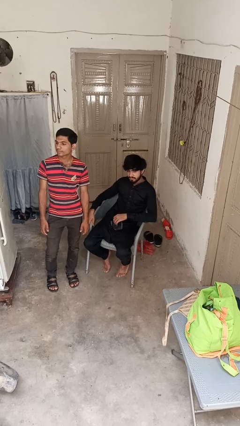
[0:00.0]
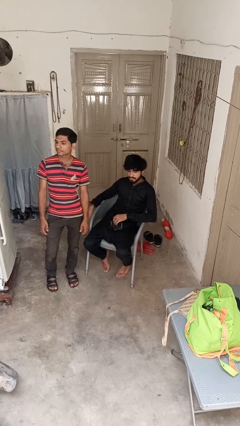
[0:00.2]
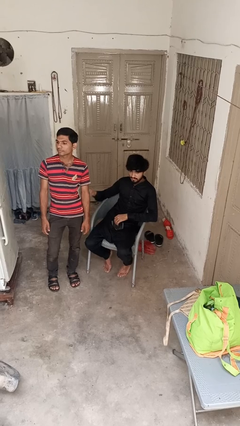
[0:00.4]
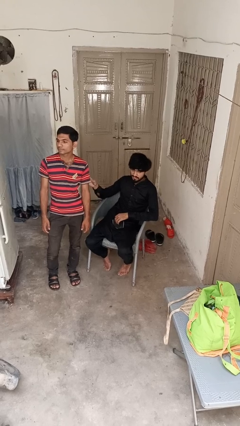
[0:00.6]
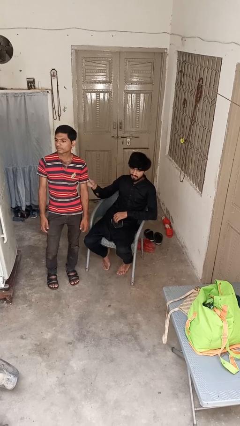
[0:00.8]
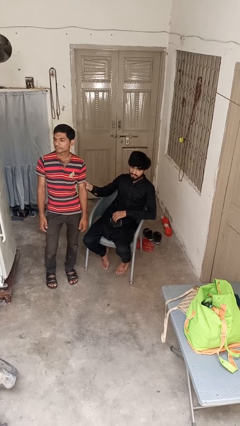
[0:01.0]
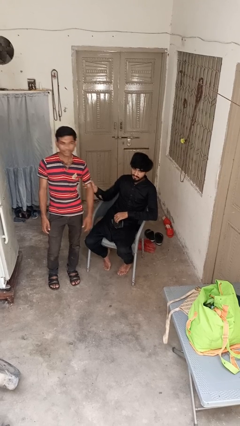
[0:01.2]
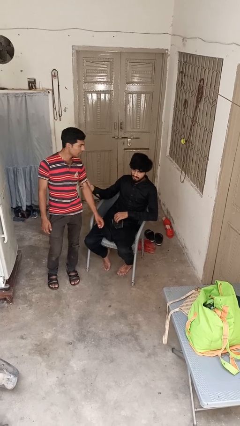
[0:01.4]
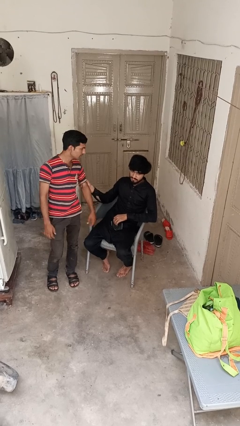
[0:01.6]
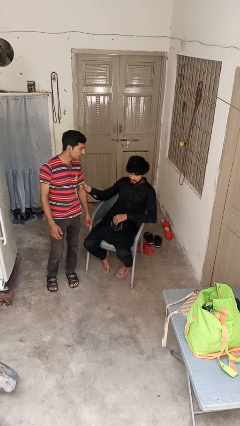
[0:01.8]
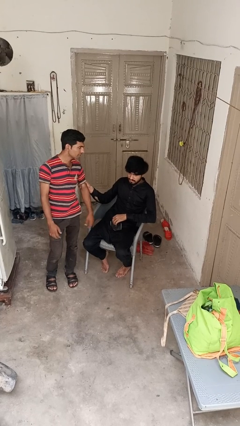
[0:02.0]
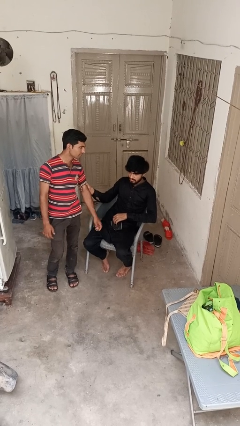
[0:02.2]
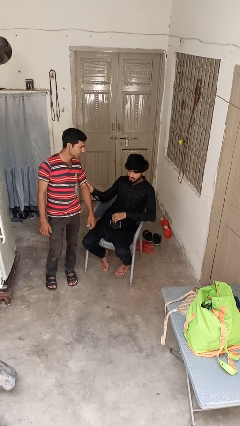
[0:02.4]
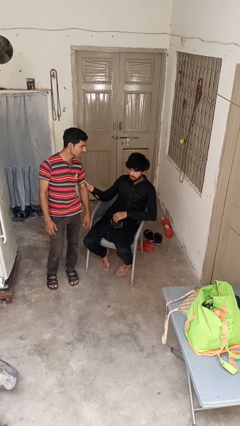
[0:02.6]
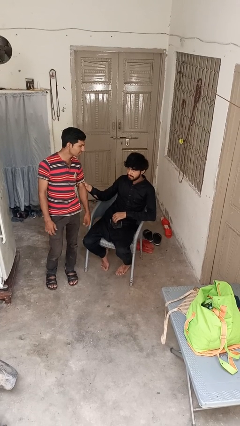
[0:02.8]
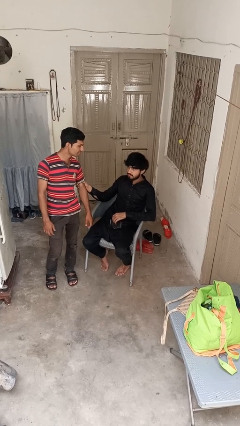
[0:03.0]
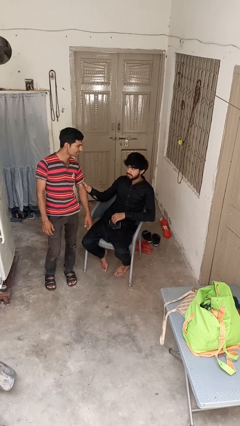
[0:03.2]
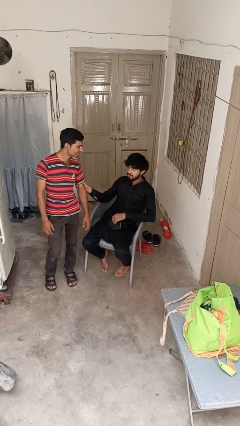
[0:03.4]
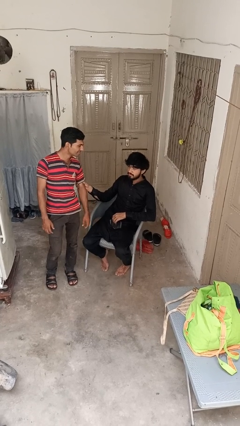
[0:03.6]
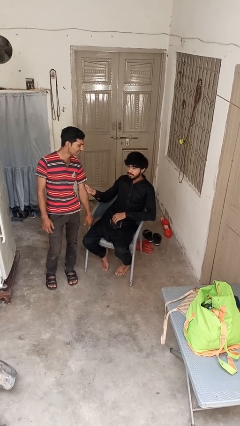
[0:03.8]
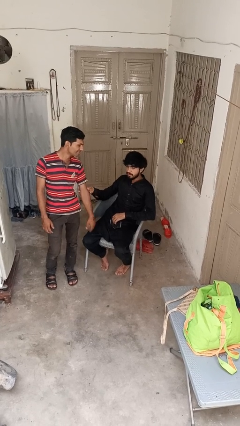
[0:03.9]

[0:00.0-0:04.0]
person grabs person by bicep

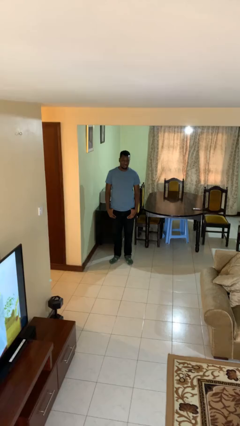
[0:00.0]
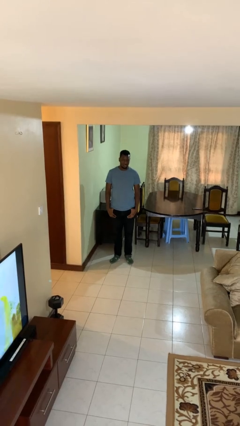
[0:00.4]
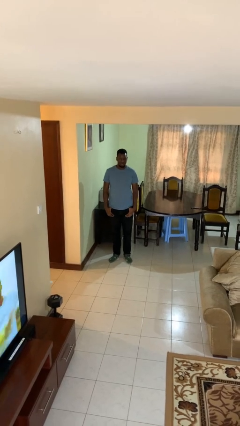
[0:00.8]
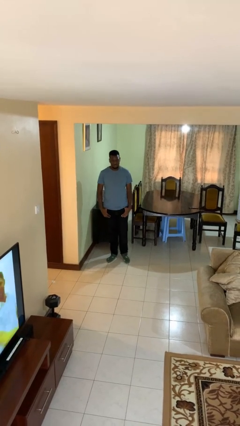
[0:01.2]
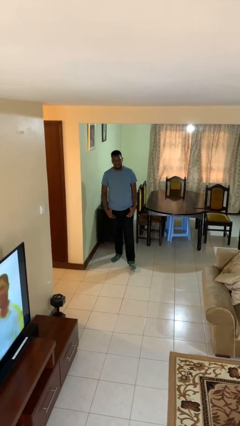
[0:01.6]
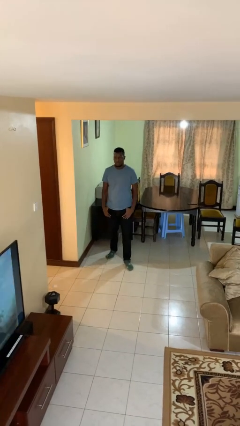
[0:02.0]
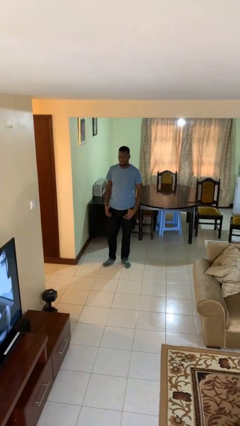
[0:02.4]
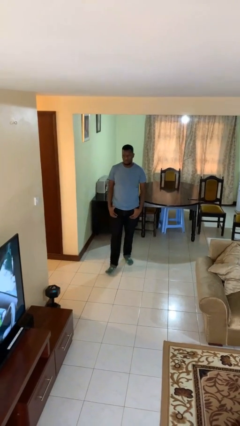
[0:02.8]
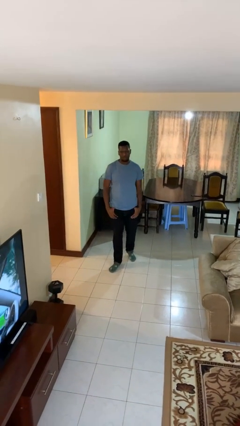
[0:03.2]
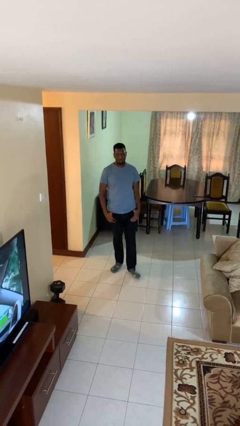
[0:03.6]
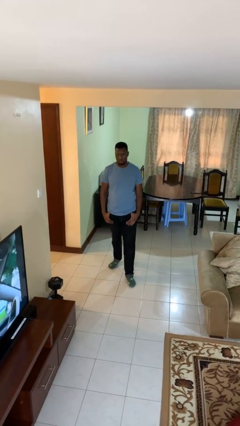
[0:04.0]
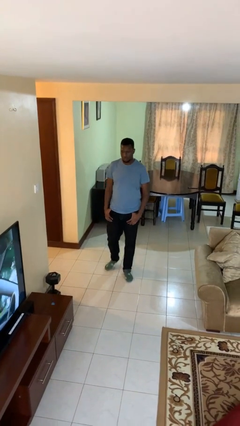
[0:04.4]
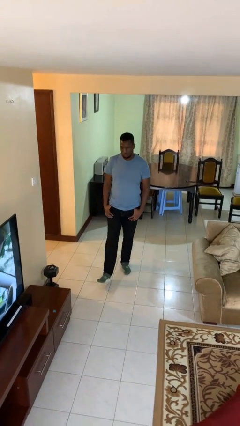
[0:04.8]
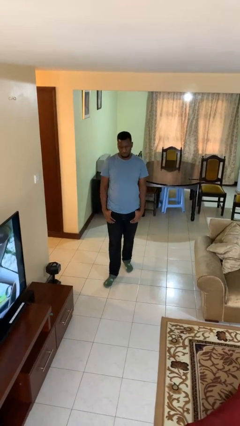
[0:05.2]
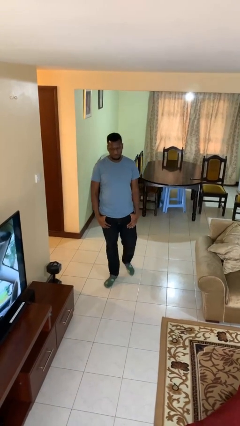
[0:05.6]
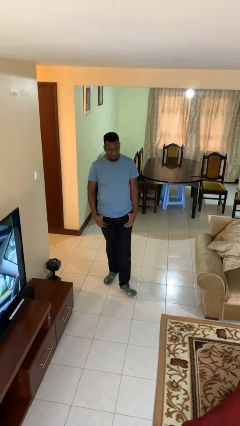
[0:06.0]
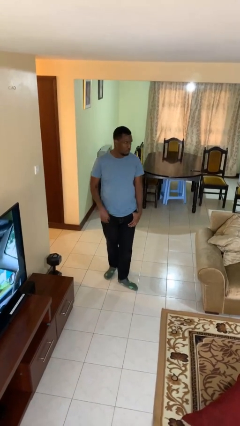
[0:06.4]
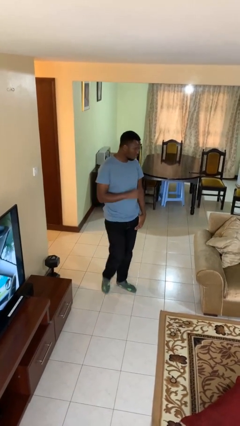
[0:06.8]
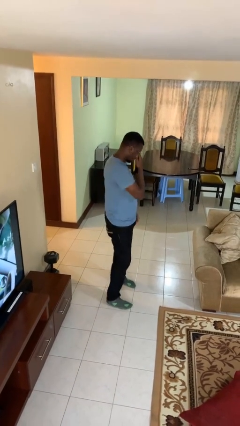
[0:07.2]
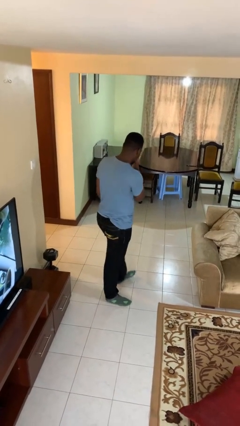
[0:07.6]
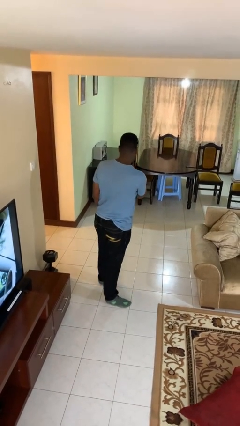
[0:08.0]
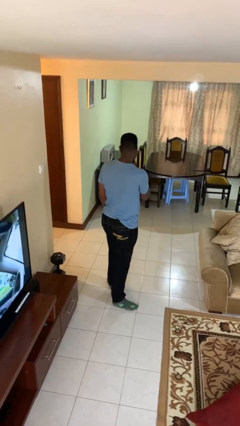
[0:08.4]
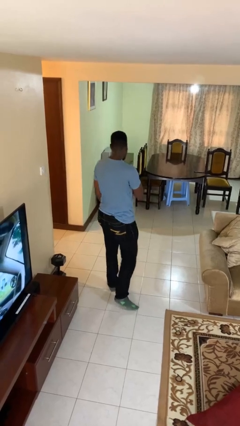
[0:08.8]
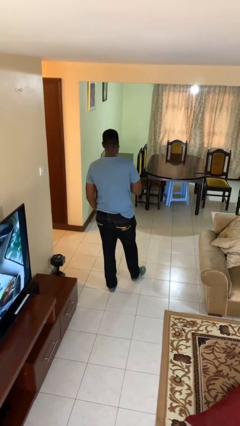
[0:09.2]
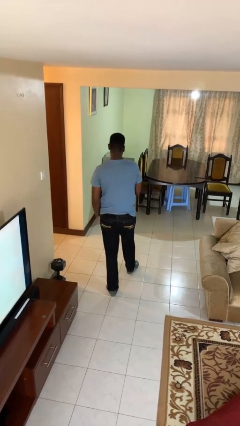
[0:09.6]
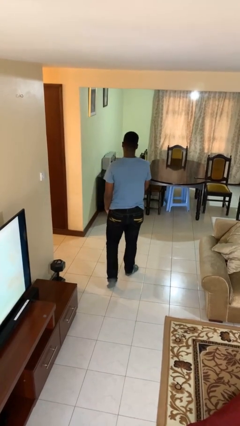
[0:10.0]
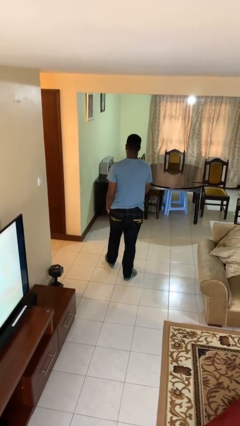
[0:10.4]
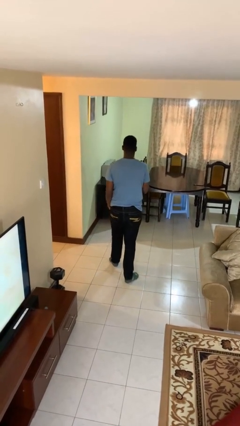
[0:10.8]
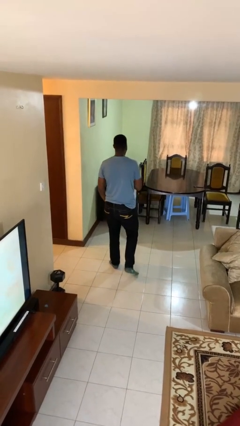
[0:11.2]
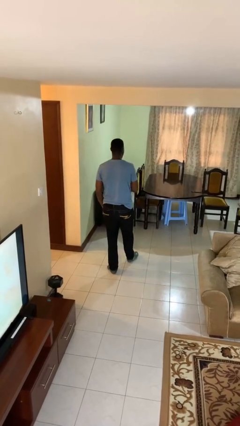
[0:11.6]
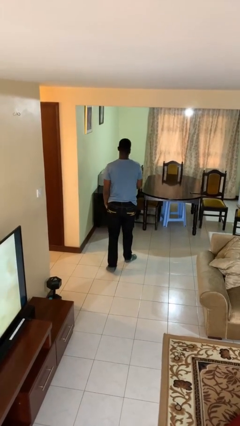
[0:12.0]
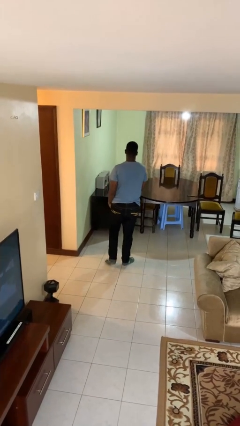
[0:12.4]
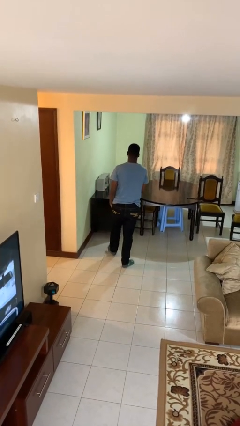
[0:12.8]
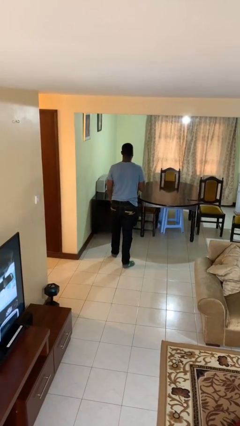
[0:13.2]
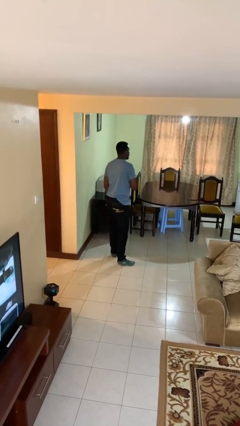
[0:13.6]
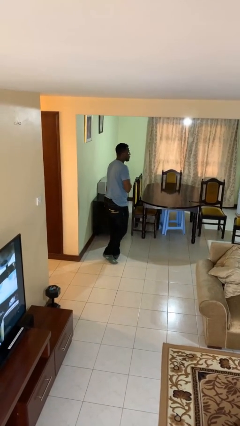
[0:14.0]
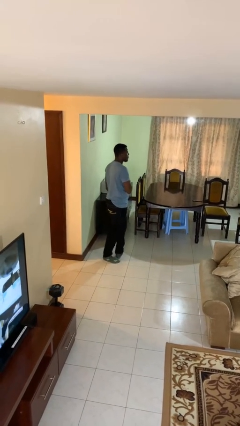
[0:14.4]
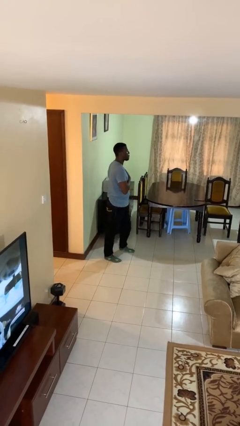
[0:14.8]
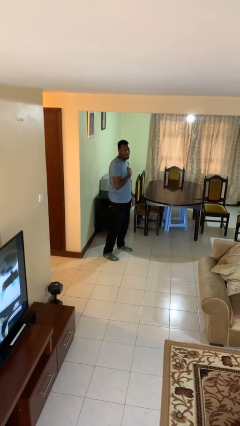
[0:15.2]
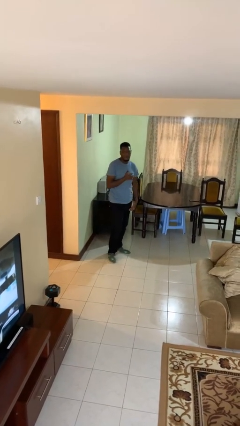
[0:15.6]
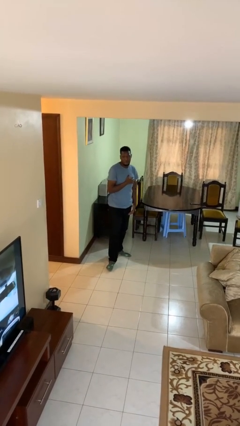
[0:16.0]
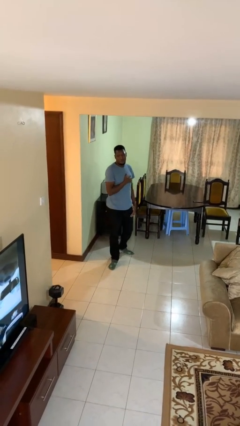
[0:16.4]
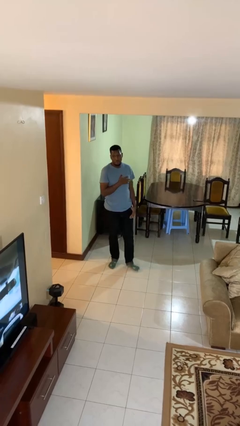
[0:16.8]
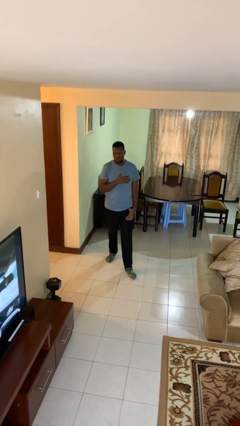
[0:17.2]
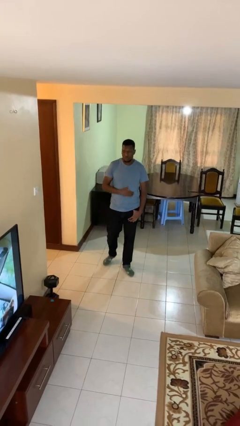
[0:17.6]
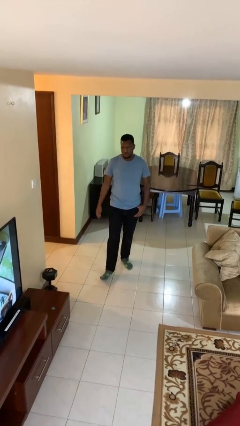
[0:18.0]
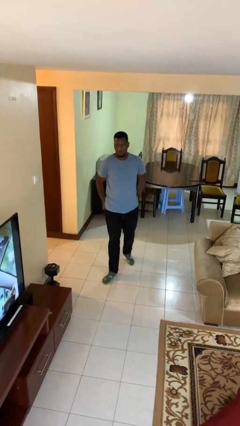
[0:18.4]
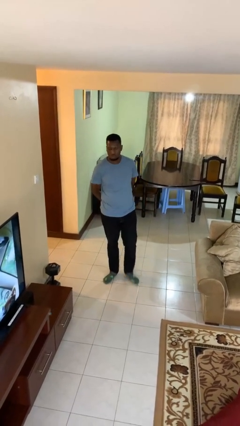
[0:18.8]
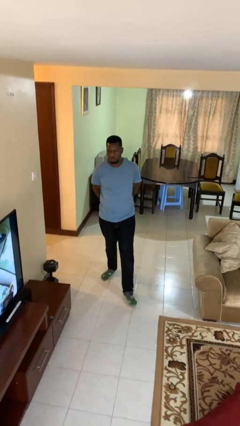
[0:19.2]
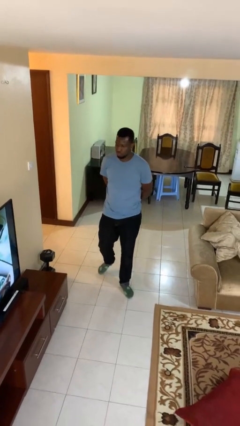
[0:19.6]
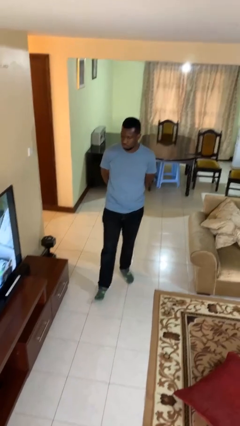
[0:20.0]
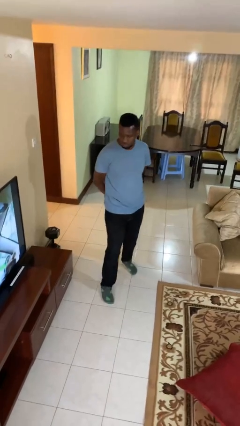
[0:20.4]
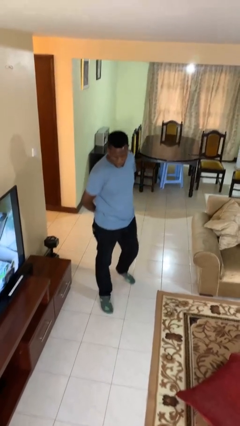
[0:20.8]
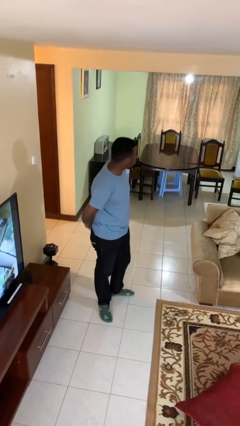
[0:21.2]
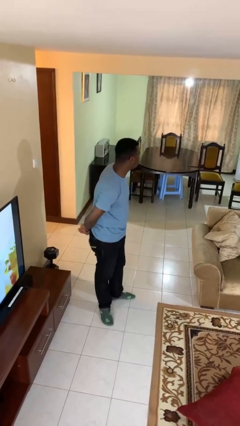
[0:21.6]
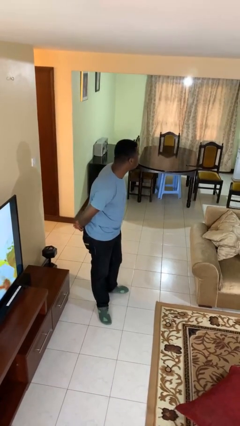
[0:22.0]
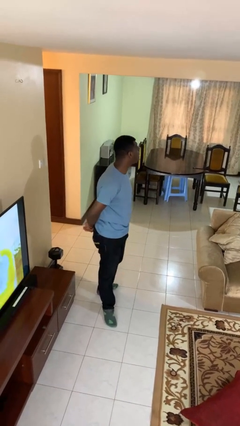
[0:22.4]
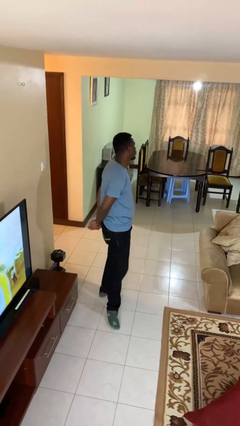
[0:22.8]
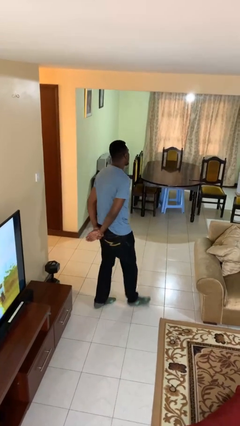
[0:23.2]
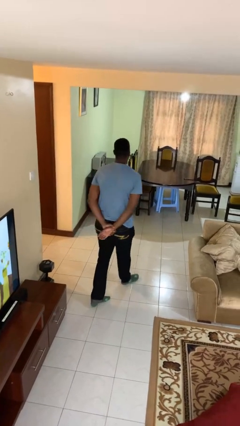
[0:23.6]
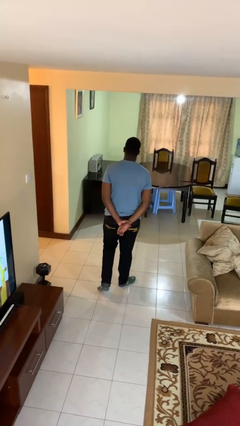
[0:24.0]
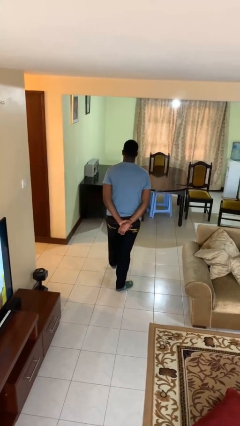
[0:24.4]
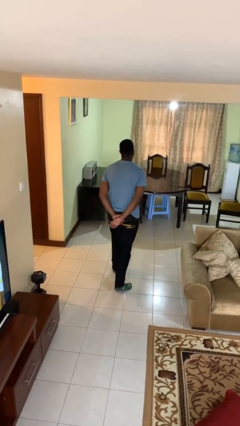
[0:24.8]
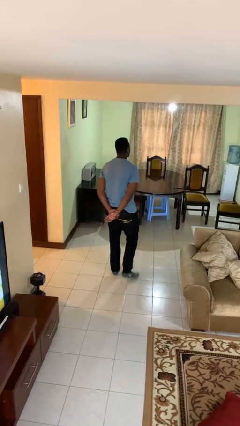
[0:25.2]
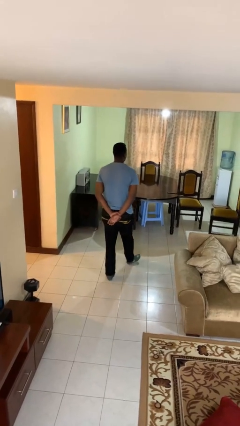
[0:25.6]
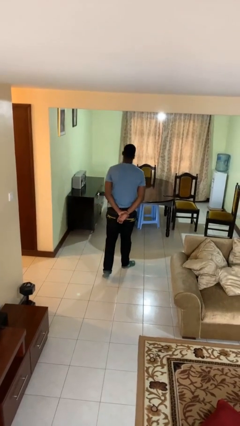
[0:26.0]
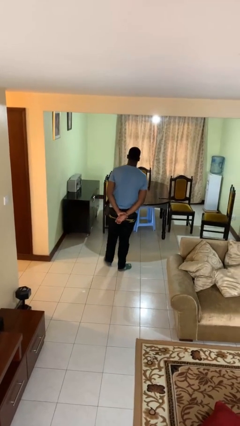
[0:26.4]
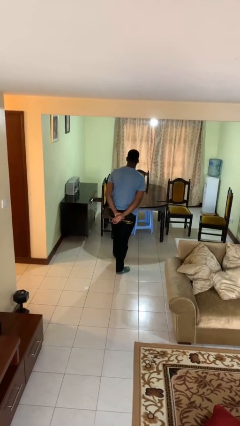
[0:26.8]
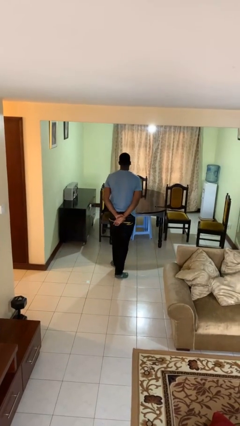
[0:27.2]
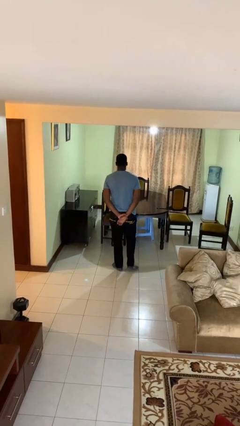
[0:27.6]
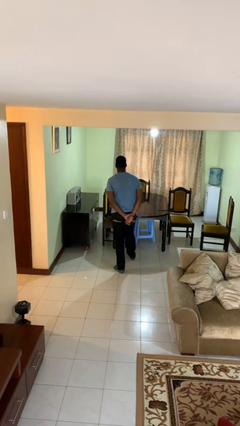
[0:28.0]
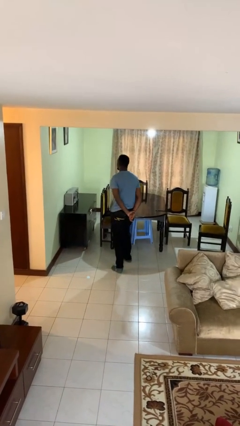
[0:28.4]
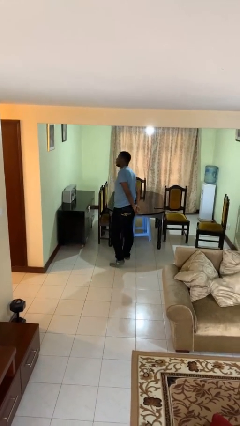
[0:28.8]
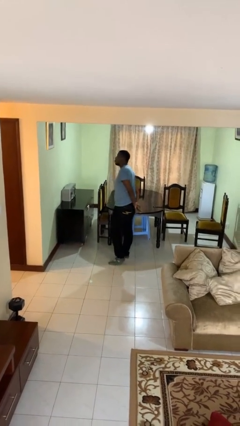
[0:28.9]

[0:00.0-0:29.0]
person walks
